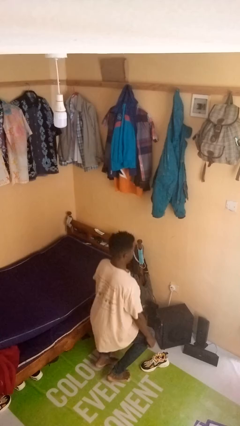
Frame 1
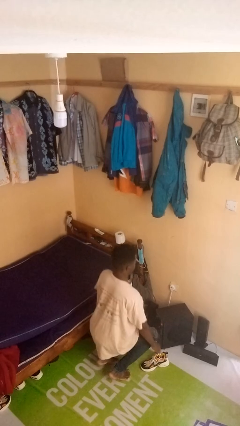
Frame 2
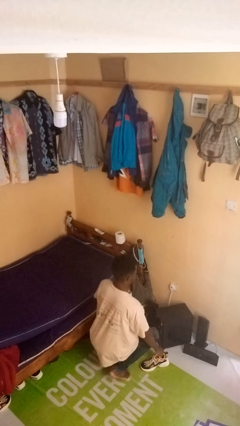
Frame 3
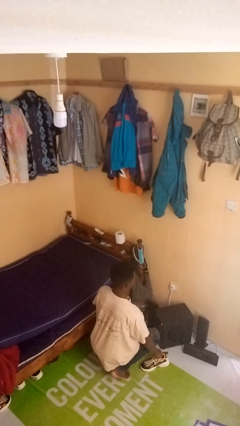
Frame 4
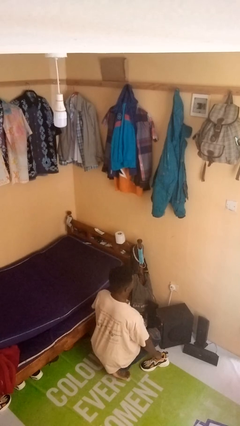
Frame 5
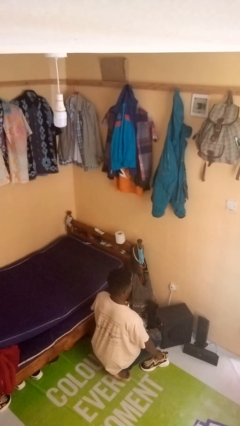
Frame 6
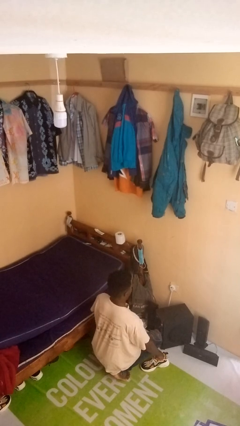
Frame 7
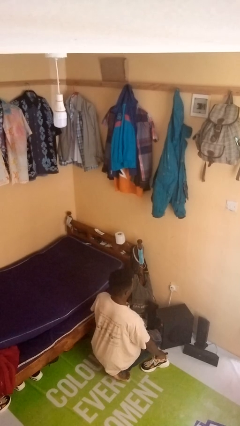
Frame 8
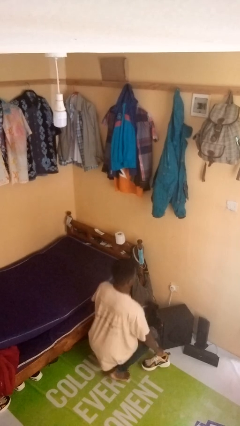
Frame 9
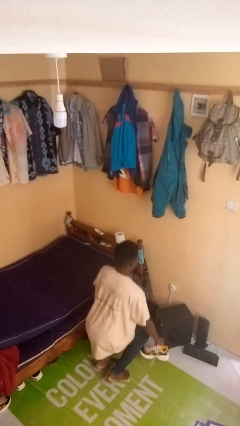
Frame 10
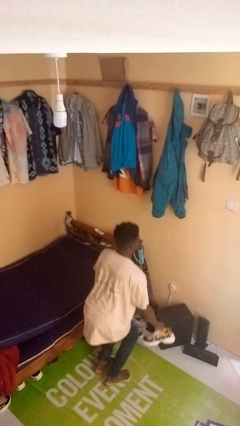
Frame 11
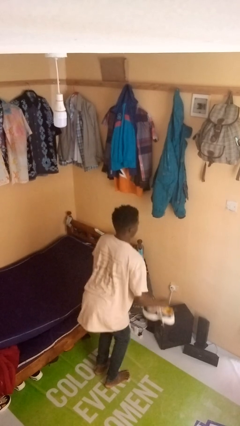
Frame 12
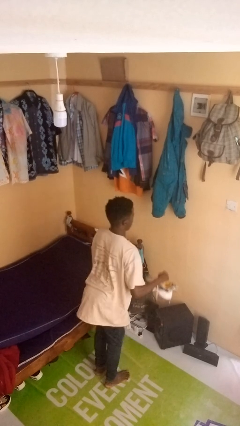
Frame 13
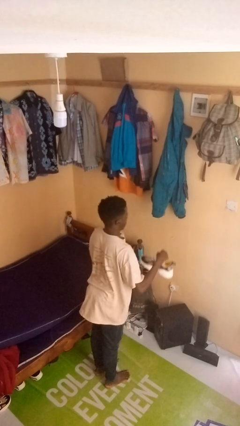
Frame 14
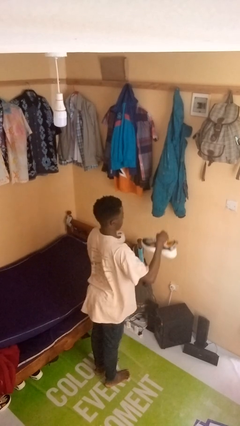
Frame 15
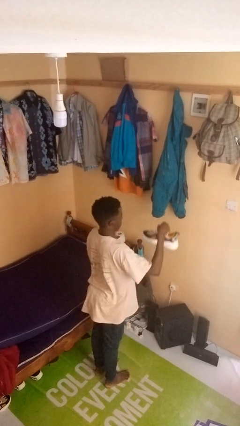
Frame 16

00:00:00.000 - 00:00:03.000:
person picks up object from floor

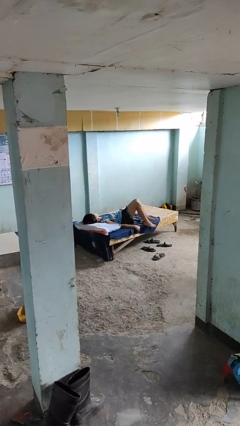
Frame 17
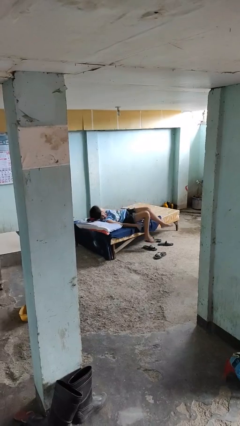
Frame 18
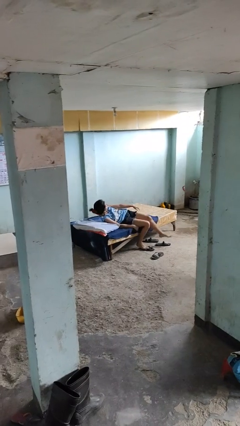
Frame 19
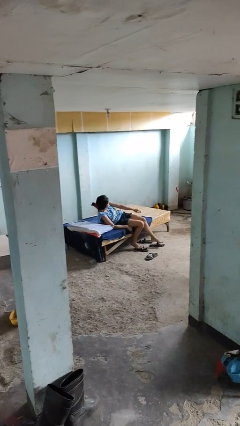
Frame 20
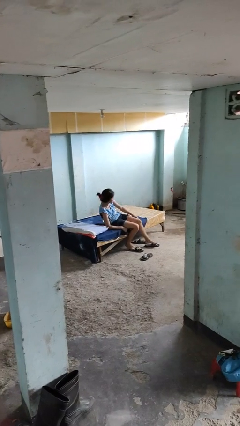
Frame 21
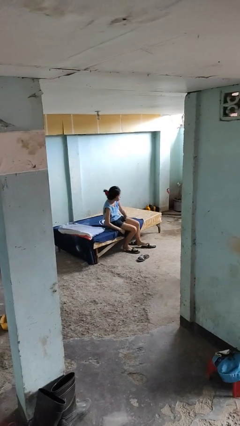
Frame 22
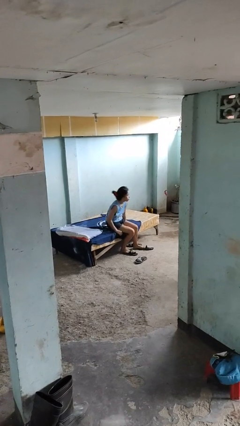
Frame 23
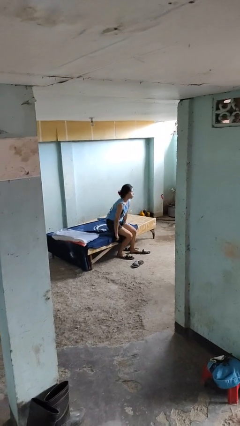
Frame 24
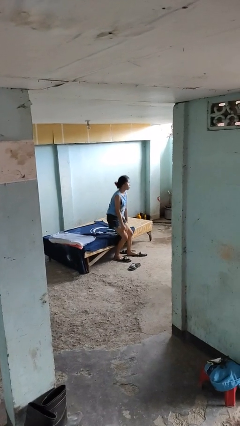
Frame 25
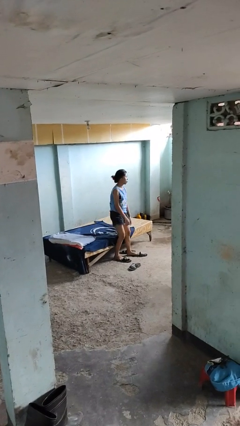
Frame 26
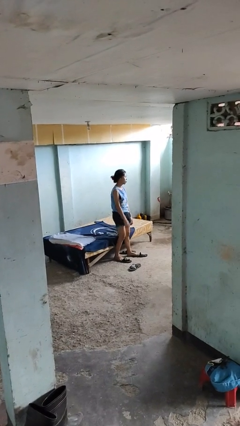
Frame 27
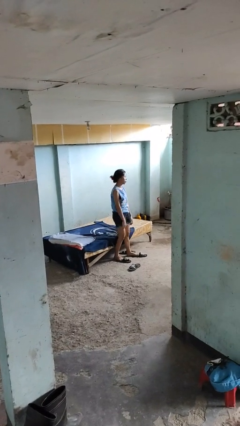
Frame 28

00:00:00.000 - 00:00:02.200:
person stands up

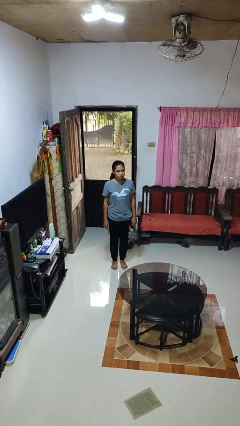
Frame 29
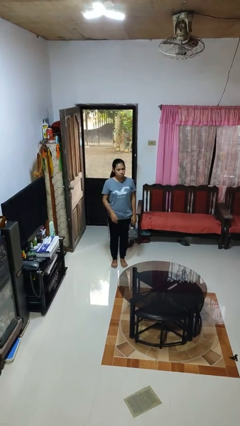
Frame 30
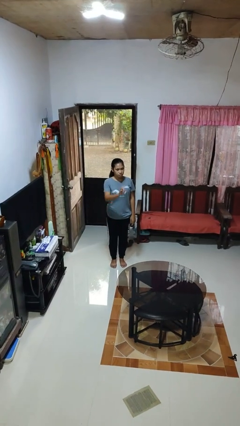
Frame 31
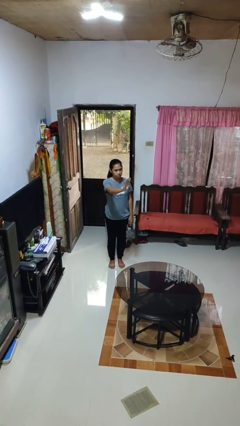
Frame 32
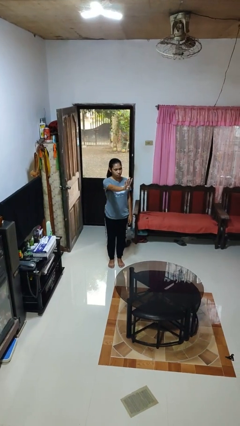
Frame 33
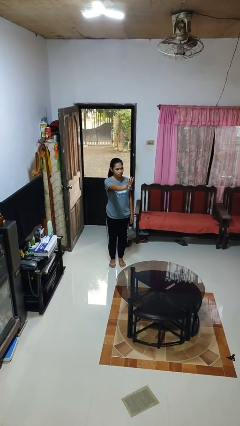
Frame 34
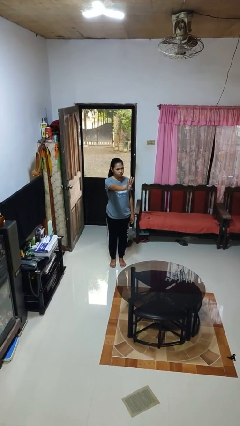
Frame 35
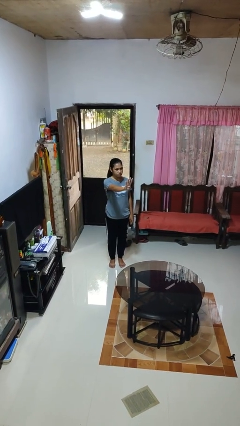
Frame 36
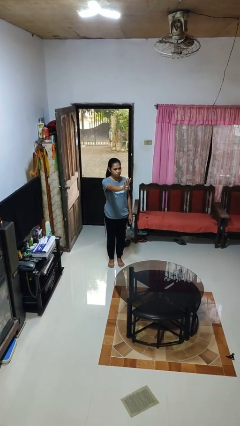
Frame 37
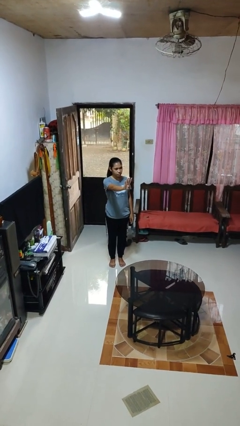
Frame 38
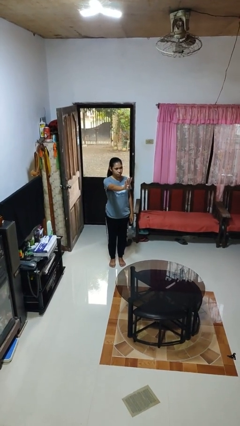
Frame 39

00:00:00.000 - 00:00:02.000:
person gestures number four

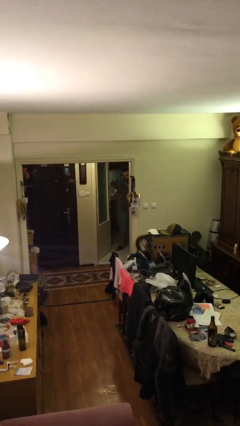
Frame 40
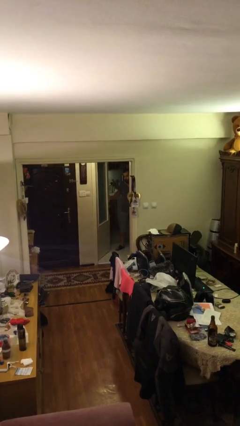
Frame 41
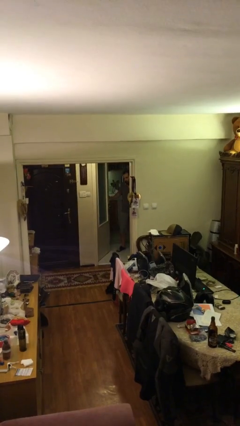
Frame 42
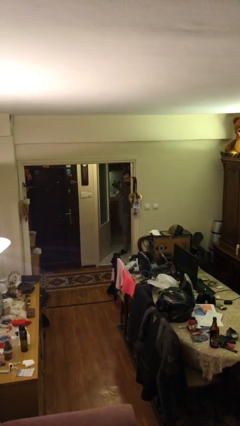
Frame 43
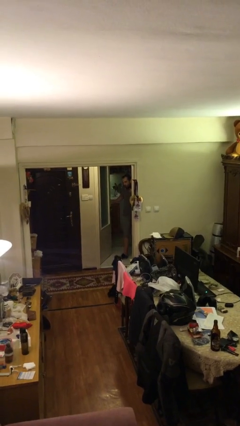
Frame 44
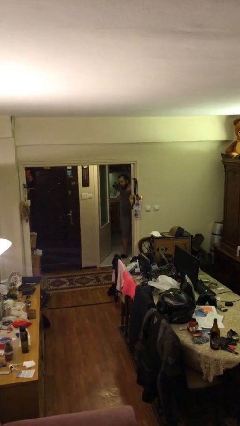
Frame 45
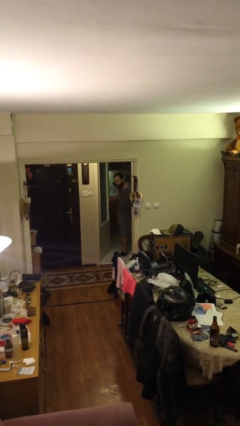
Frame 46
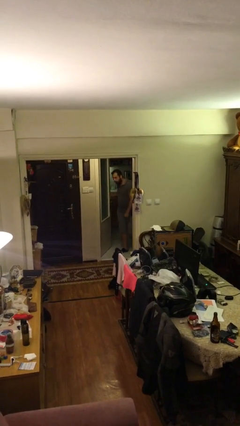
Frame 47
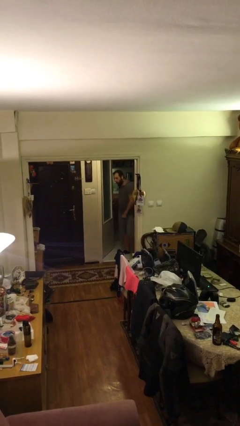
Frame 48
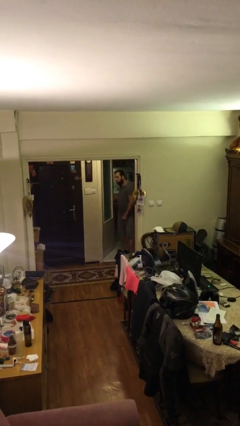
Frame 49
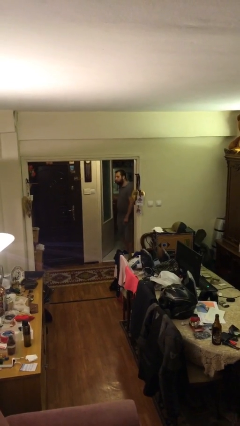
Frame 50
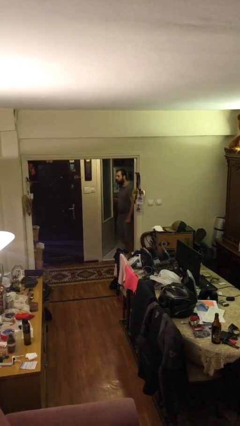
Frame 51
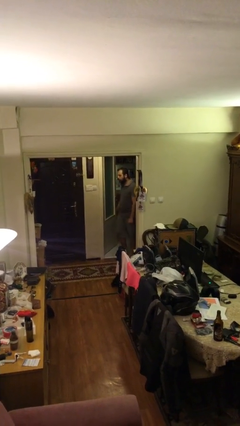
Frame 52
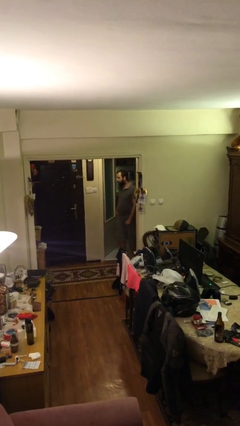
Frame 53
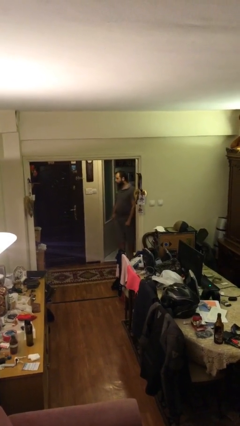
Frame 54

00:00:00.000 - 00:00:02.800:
person enters scene through structure

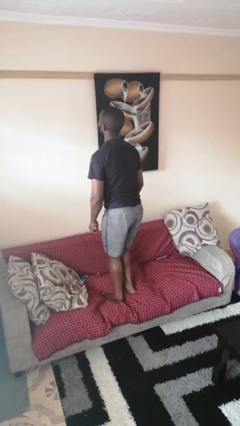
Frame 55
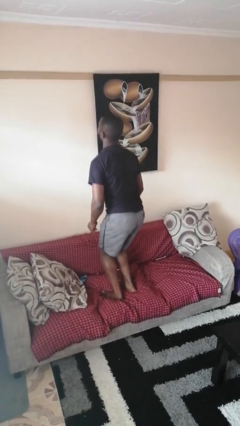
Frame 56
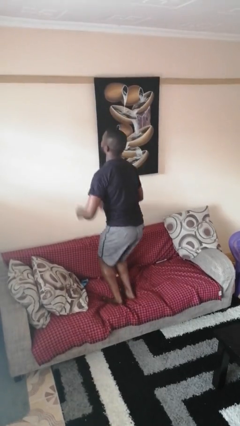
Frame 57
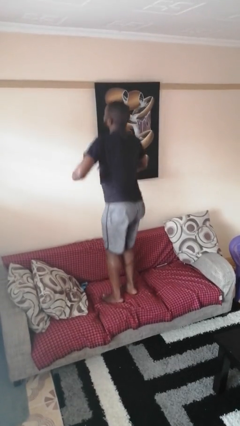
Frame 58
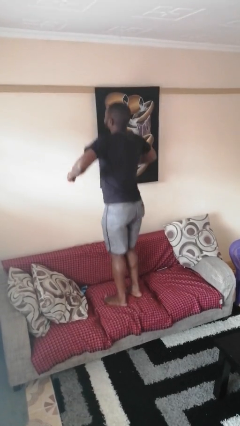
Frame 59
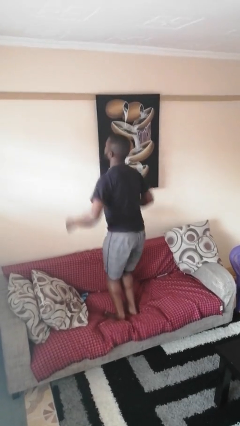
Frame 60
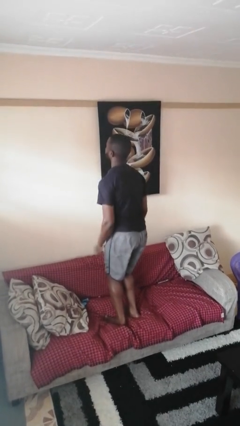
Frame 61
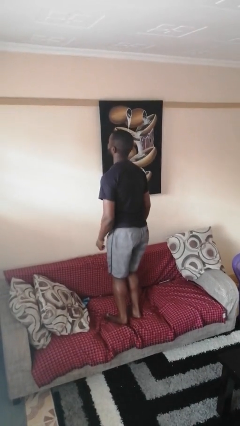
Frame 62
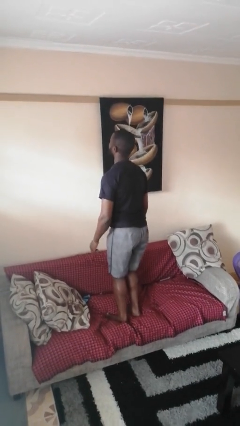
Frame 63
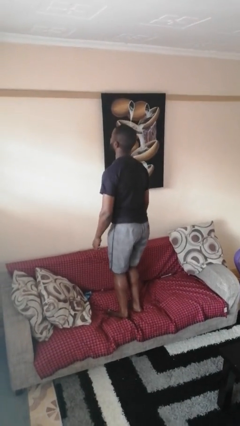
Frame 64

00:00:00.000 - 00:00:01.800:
person jumps on couch

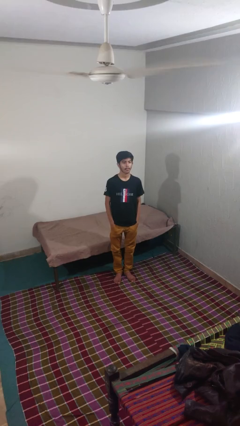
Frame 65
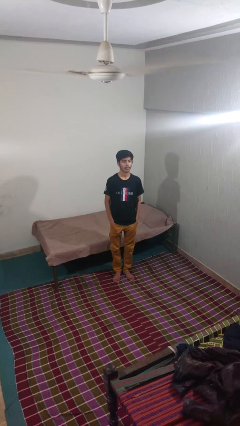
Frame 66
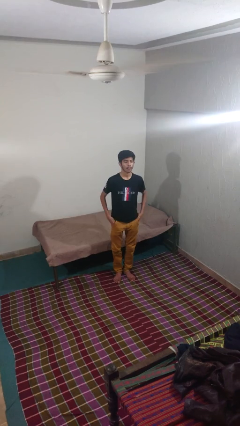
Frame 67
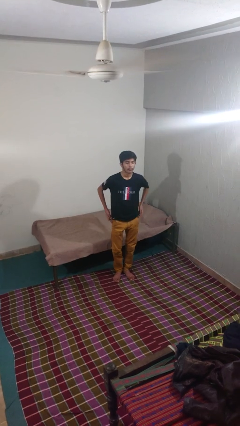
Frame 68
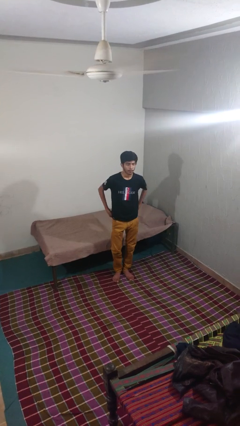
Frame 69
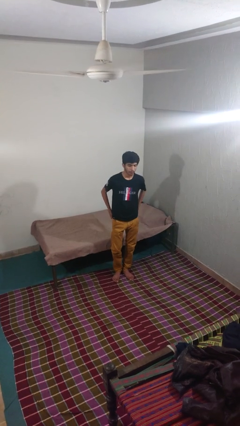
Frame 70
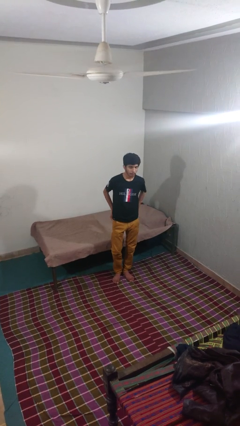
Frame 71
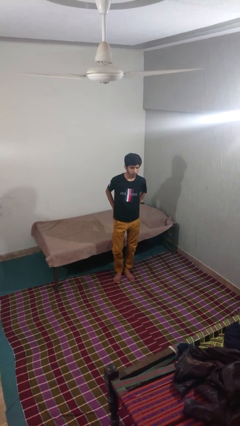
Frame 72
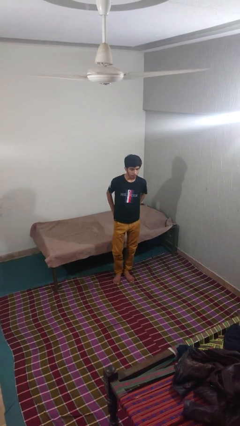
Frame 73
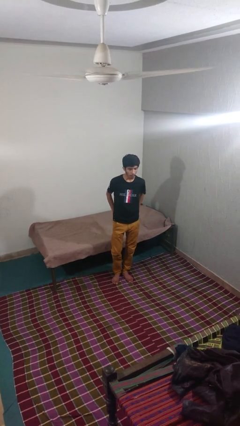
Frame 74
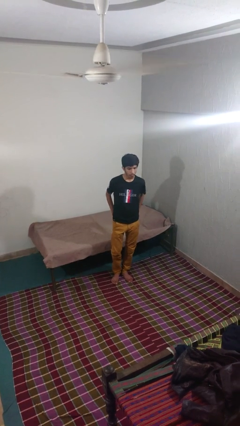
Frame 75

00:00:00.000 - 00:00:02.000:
person puts hands in back pockets

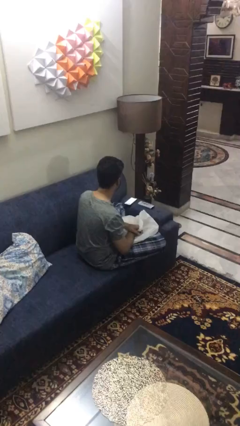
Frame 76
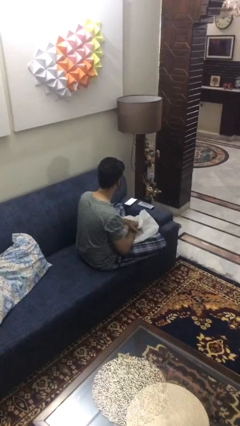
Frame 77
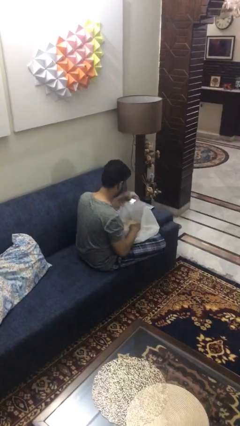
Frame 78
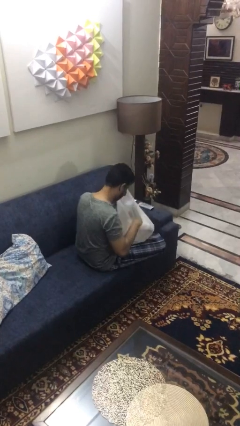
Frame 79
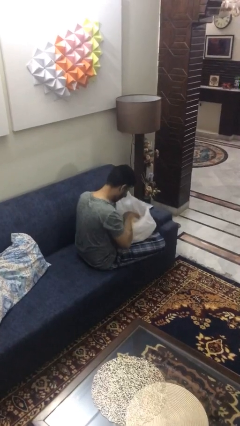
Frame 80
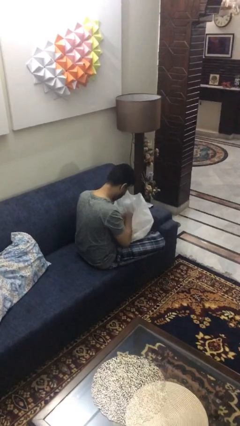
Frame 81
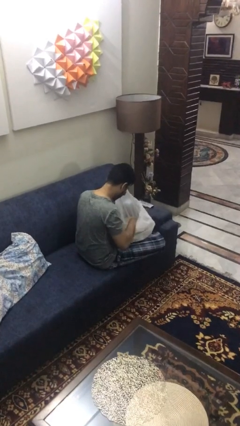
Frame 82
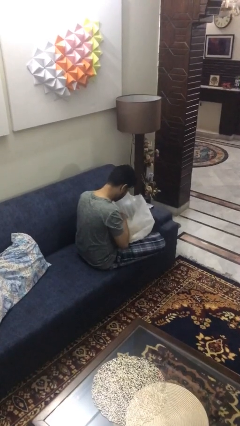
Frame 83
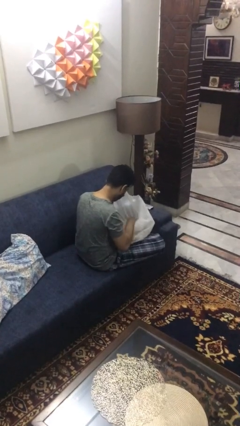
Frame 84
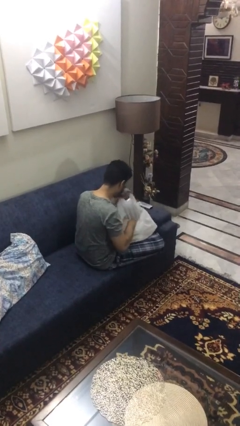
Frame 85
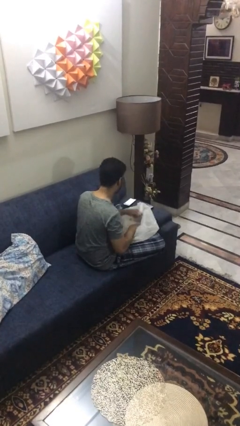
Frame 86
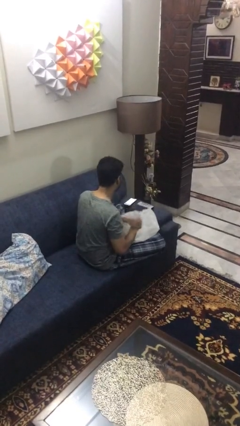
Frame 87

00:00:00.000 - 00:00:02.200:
person searches in bag

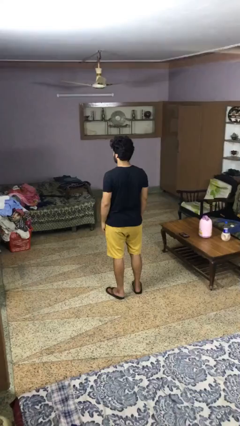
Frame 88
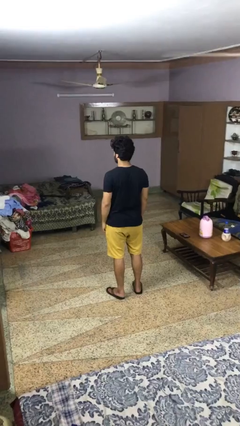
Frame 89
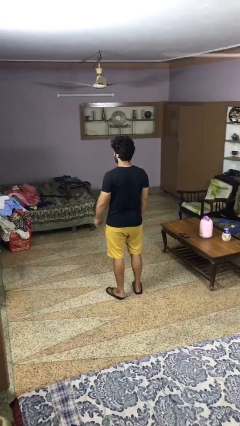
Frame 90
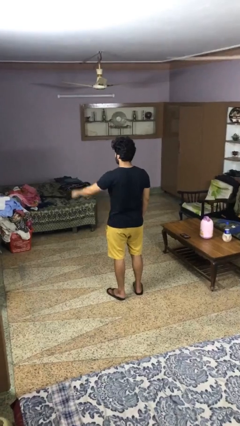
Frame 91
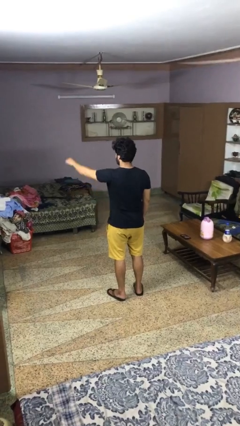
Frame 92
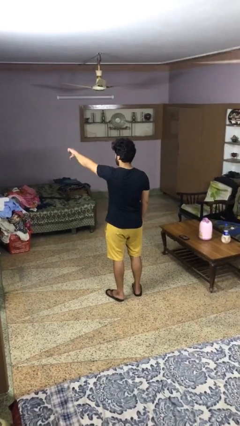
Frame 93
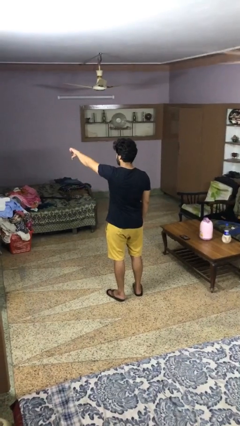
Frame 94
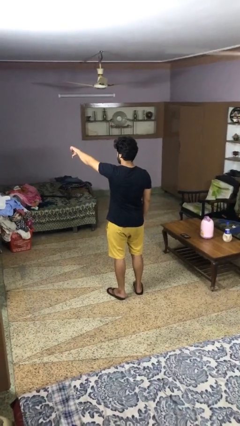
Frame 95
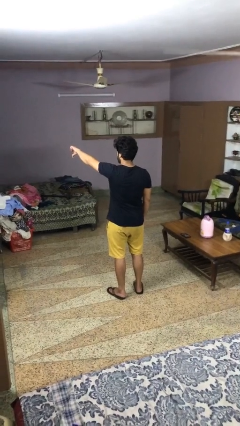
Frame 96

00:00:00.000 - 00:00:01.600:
person gestures thumbs down
